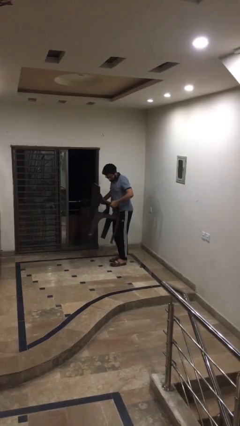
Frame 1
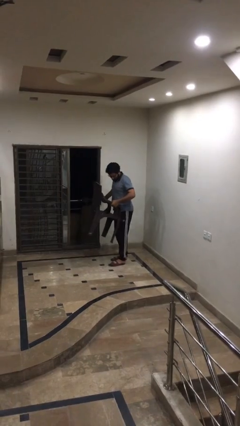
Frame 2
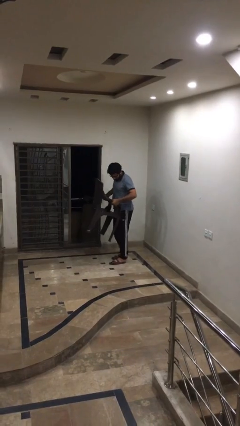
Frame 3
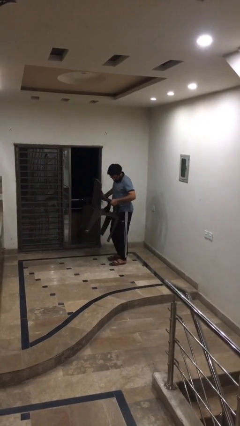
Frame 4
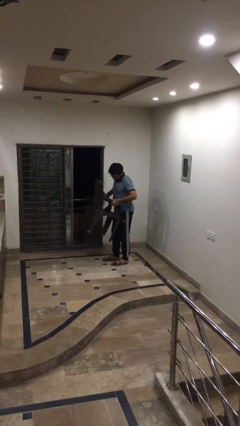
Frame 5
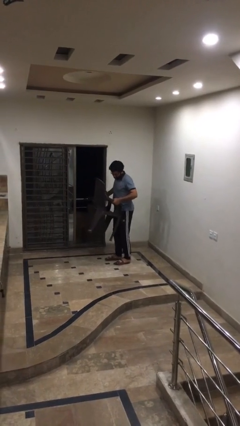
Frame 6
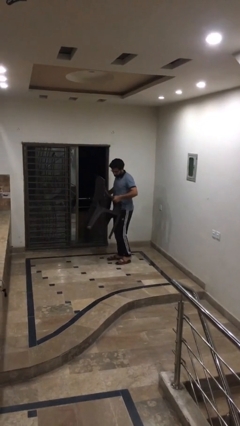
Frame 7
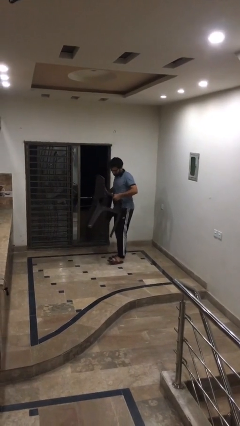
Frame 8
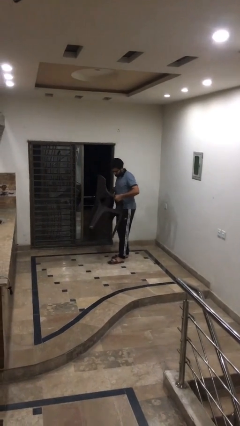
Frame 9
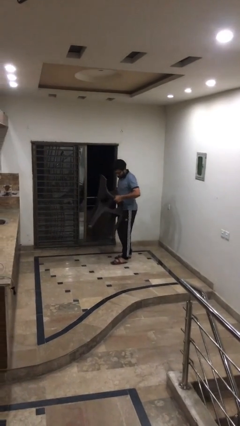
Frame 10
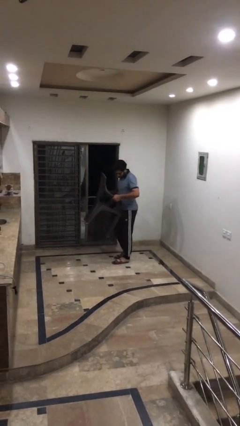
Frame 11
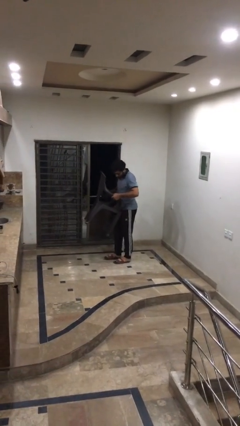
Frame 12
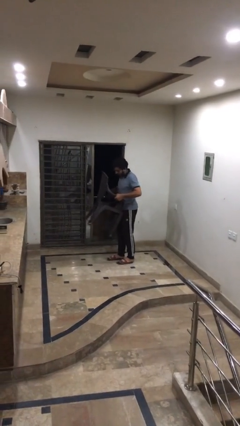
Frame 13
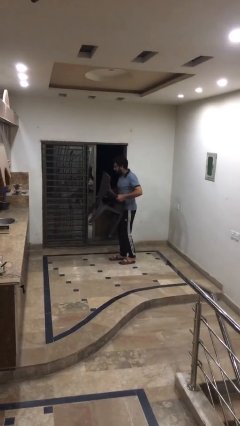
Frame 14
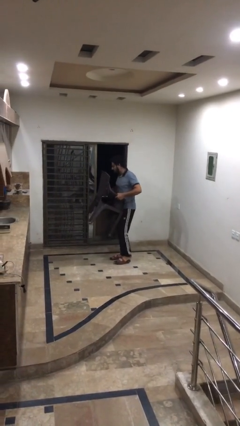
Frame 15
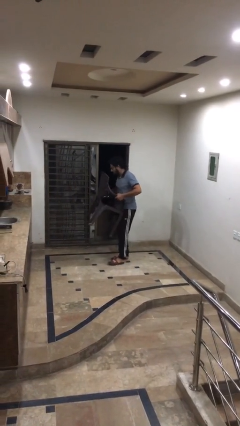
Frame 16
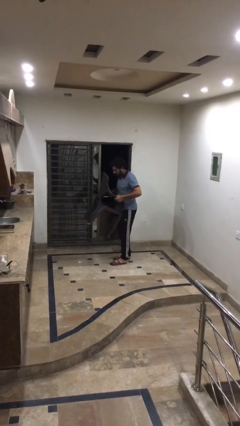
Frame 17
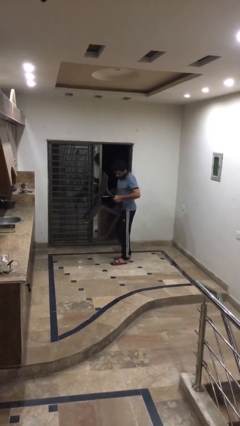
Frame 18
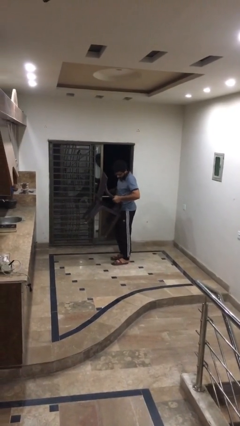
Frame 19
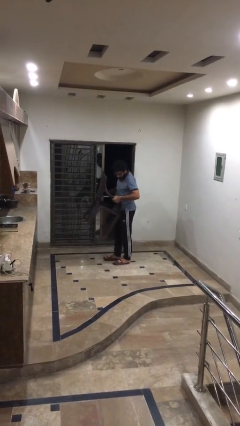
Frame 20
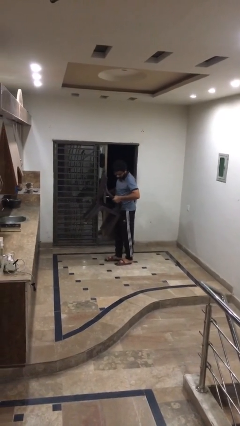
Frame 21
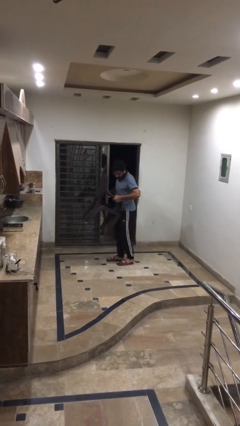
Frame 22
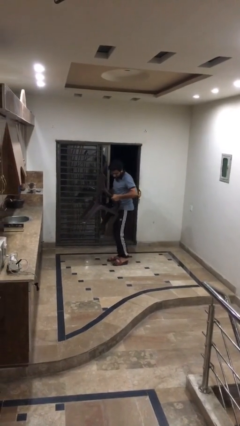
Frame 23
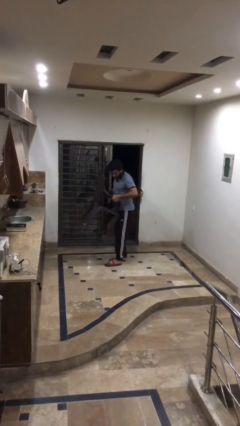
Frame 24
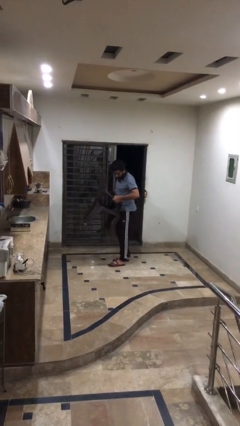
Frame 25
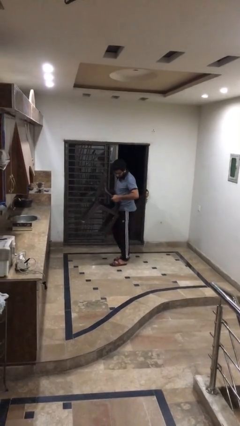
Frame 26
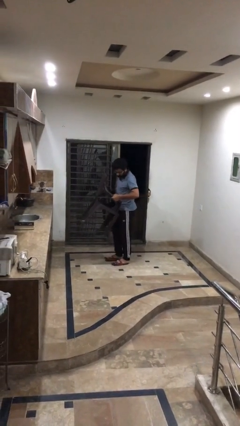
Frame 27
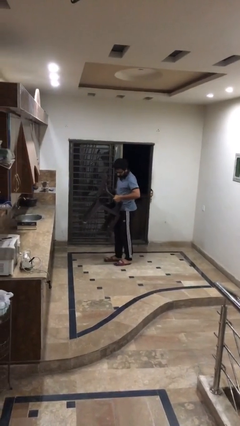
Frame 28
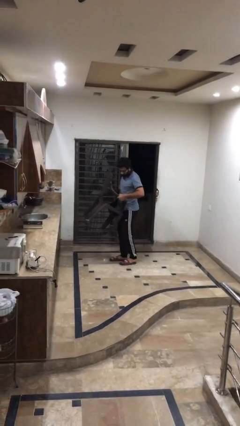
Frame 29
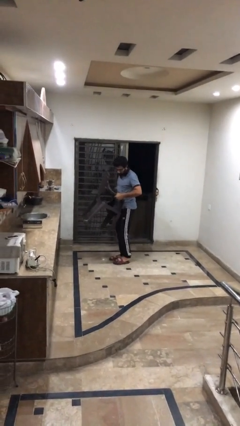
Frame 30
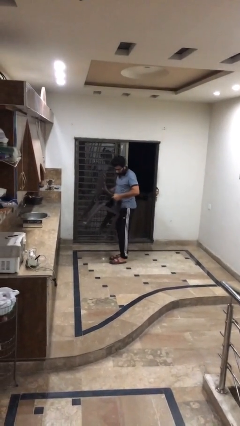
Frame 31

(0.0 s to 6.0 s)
person carries heavy object

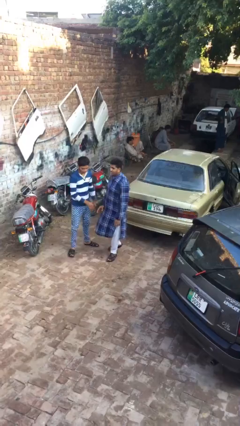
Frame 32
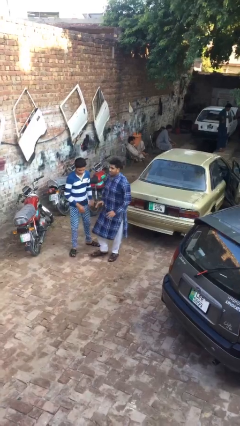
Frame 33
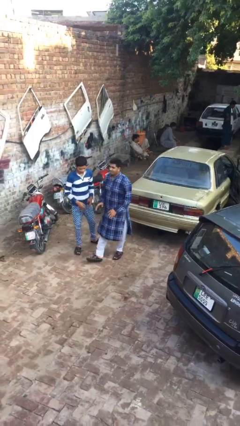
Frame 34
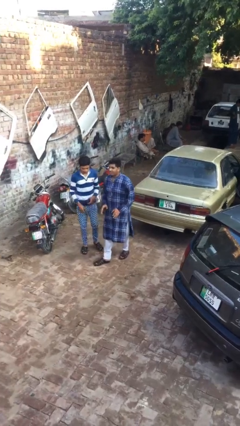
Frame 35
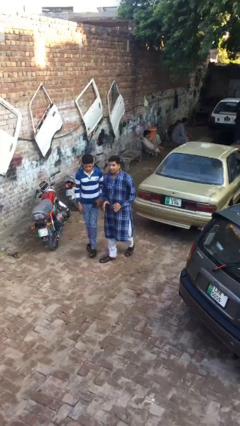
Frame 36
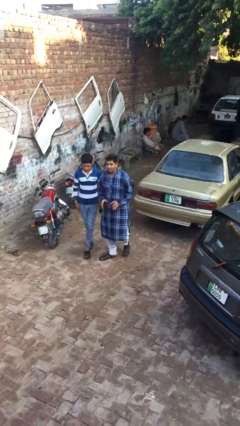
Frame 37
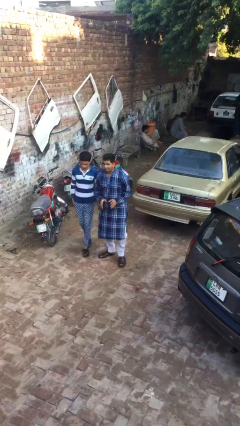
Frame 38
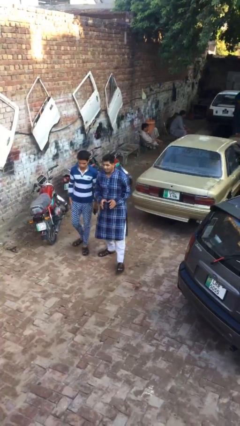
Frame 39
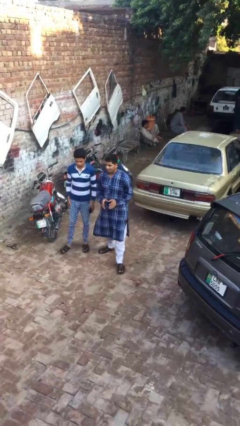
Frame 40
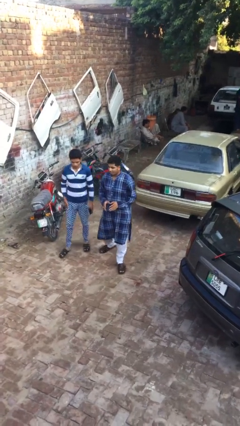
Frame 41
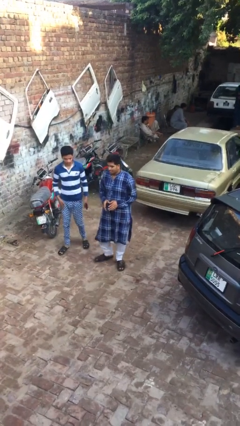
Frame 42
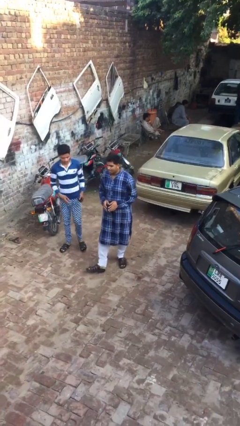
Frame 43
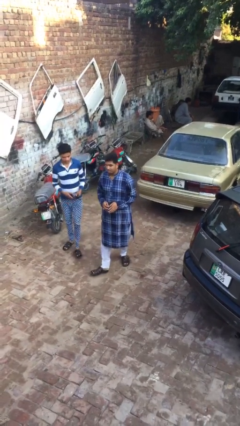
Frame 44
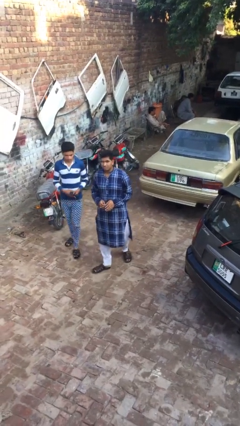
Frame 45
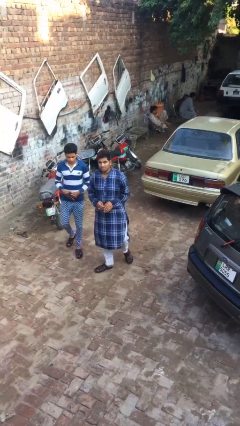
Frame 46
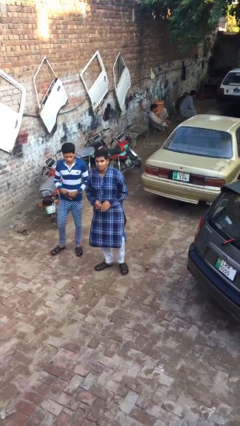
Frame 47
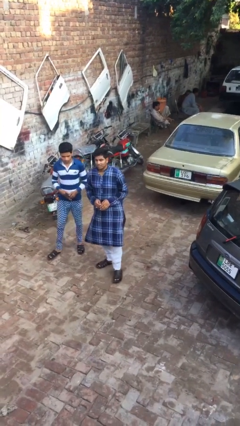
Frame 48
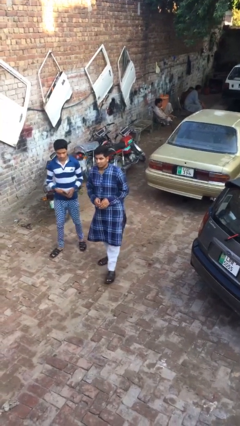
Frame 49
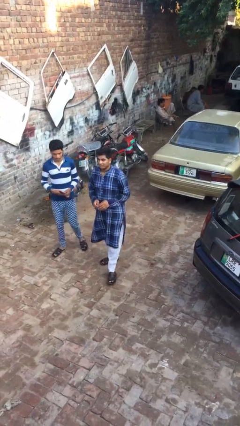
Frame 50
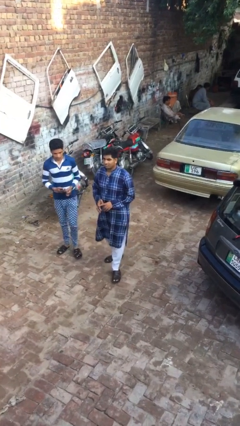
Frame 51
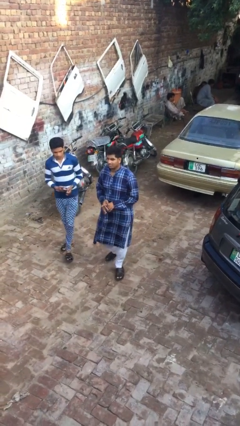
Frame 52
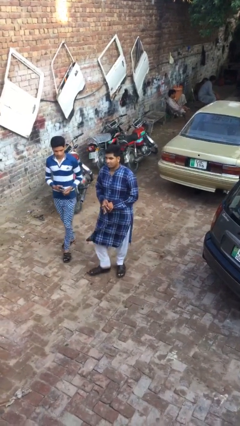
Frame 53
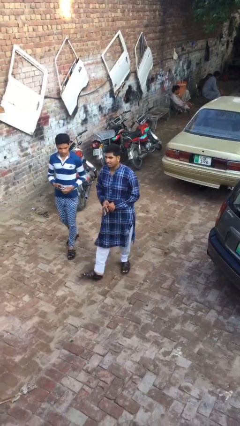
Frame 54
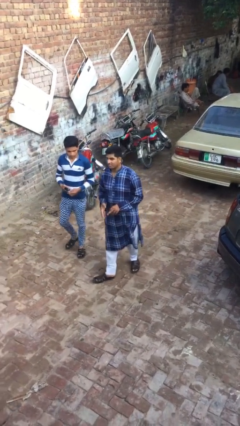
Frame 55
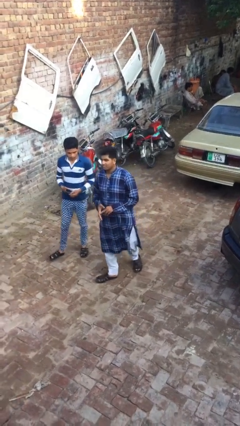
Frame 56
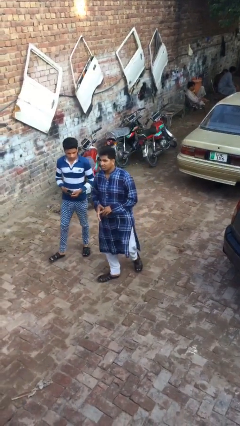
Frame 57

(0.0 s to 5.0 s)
person talks to person

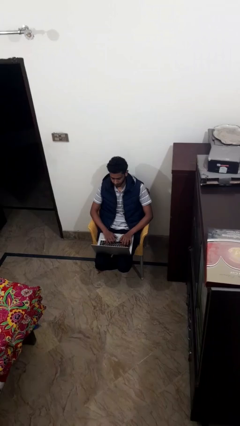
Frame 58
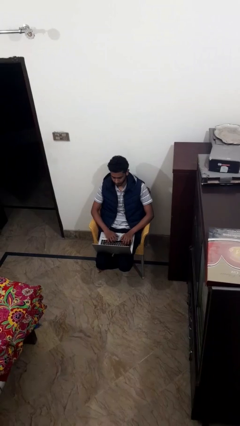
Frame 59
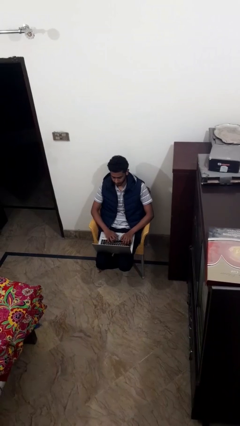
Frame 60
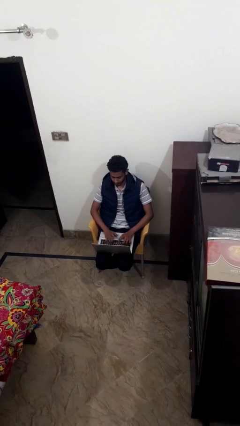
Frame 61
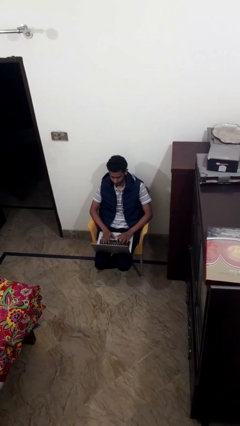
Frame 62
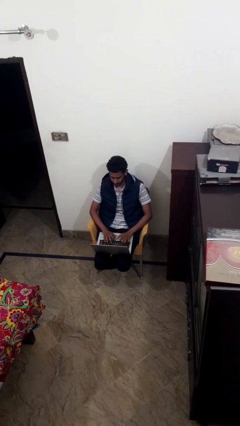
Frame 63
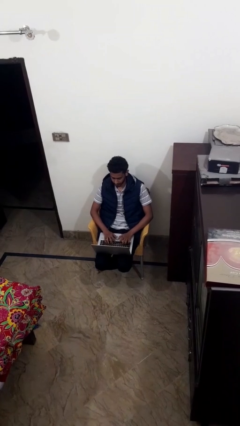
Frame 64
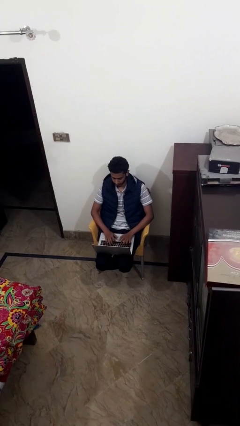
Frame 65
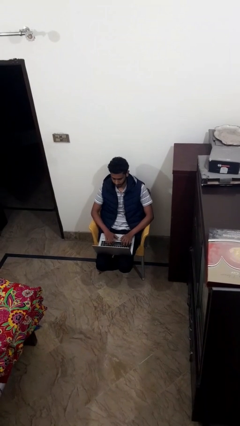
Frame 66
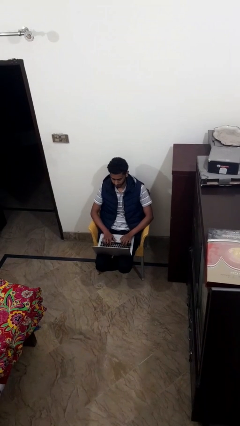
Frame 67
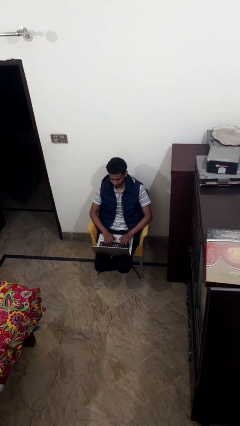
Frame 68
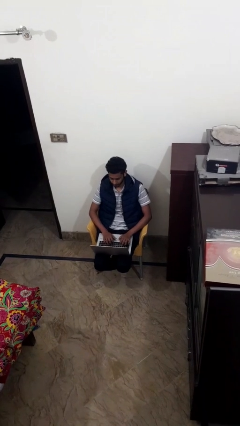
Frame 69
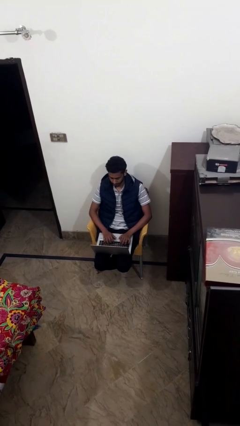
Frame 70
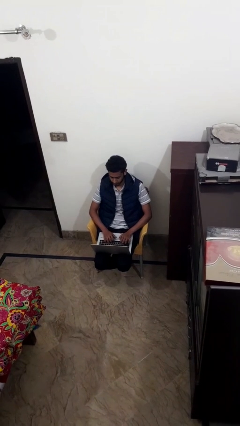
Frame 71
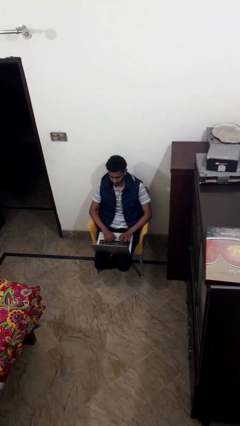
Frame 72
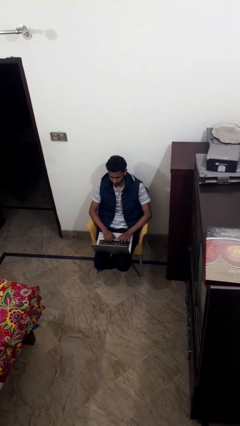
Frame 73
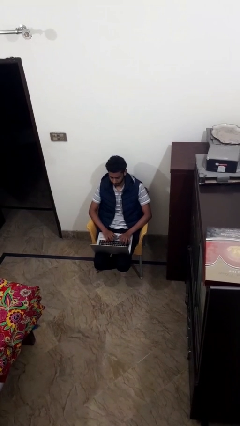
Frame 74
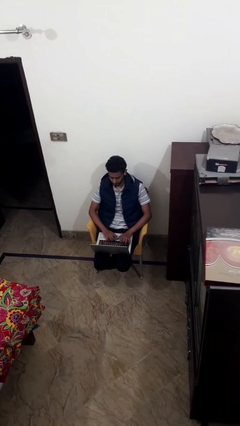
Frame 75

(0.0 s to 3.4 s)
person interacts with laptop

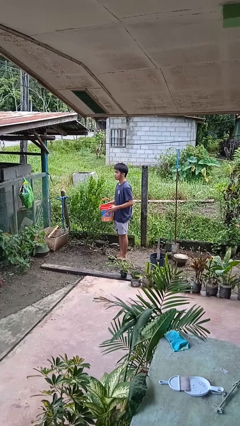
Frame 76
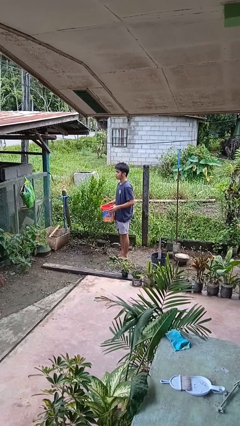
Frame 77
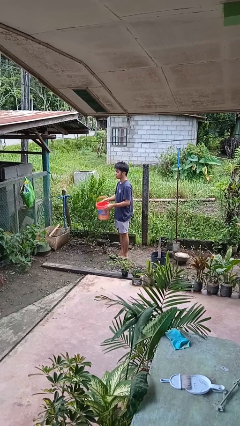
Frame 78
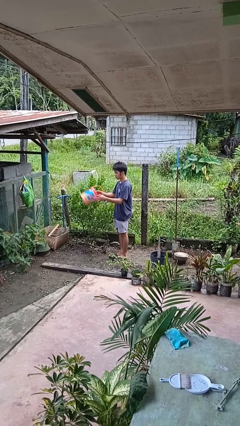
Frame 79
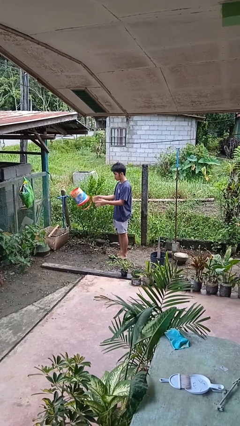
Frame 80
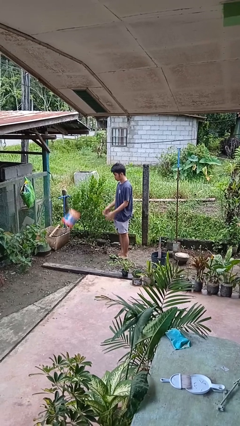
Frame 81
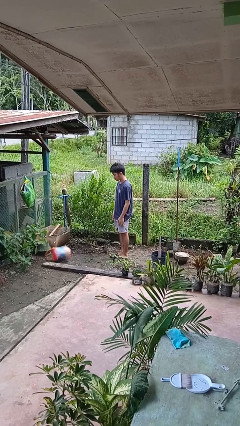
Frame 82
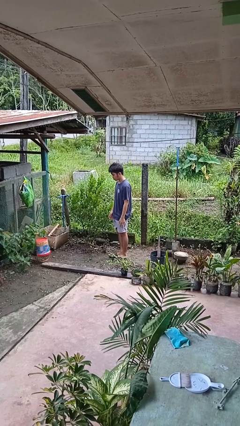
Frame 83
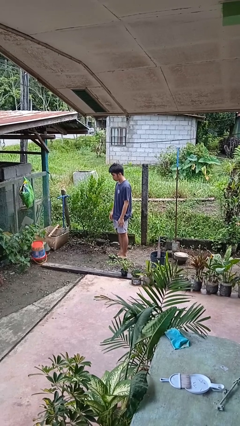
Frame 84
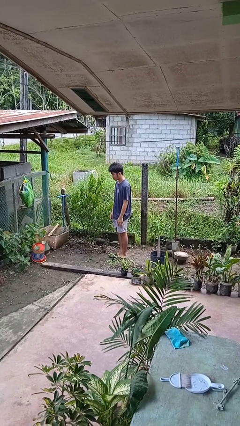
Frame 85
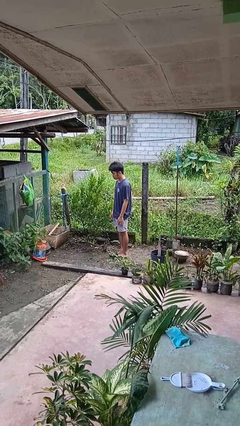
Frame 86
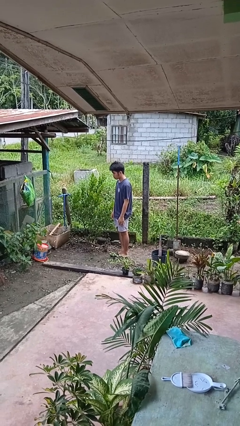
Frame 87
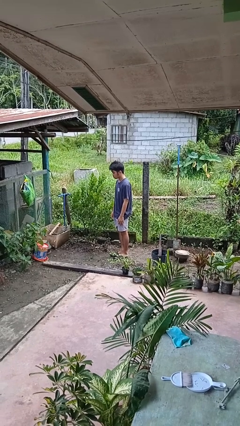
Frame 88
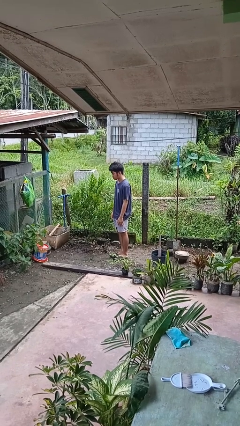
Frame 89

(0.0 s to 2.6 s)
person throws object into air

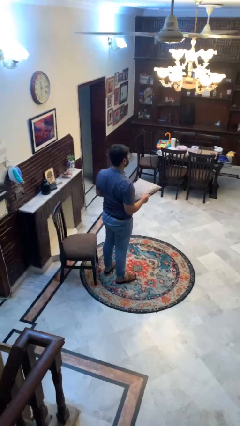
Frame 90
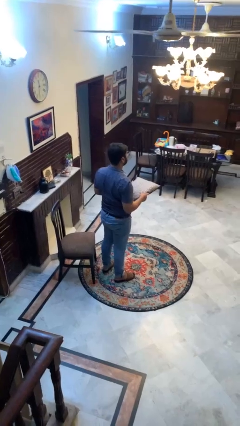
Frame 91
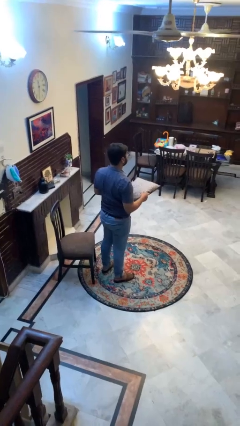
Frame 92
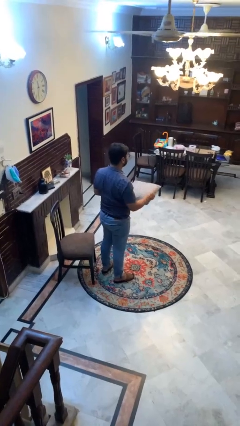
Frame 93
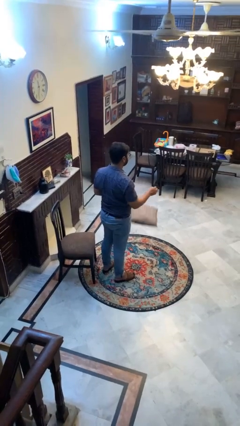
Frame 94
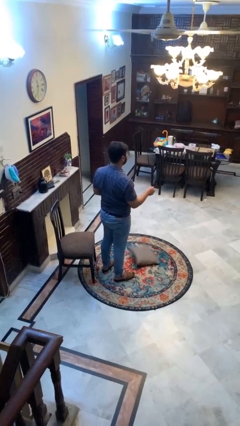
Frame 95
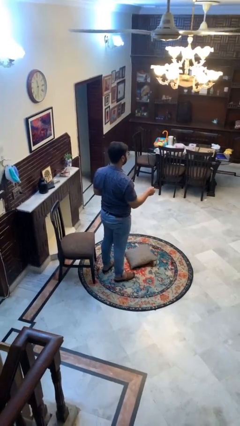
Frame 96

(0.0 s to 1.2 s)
person drops object
